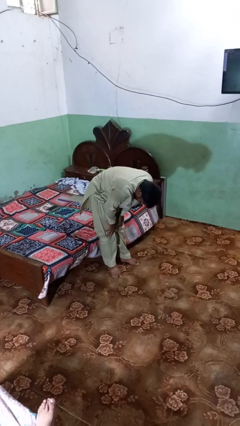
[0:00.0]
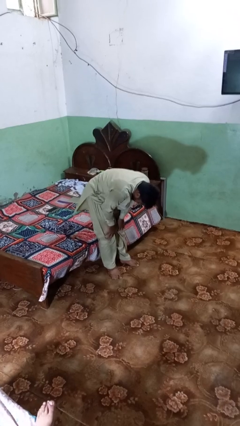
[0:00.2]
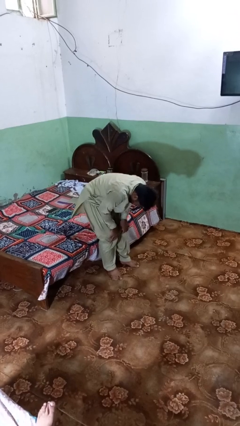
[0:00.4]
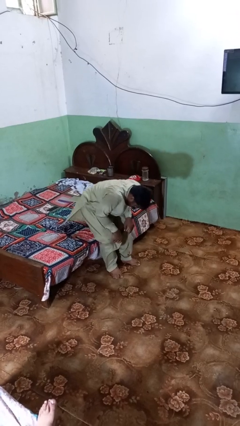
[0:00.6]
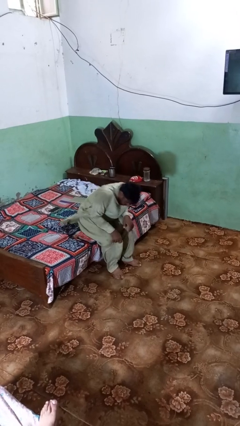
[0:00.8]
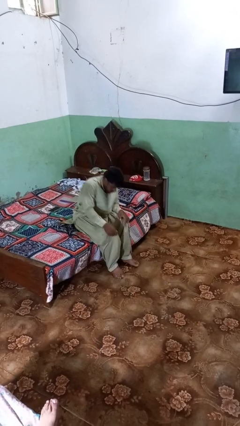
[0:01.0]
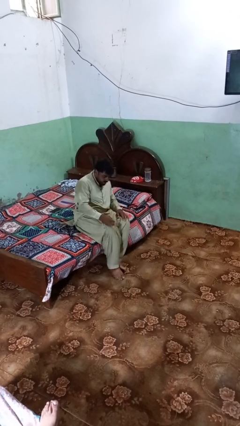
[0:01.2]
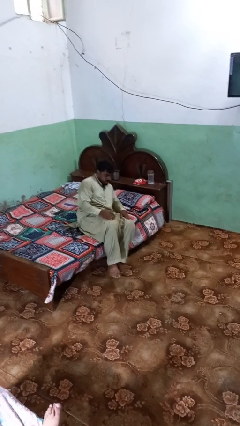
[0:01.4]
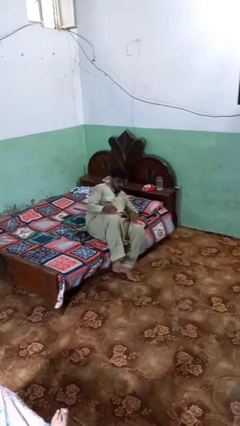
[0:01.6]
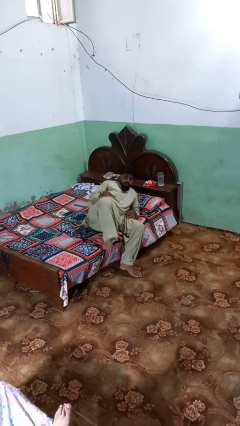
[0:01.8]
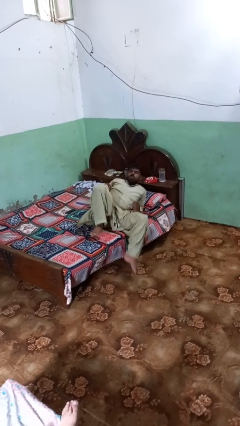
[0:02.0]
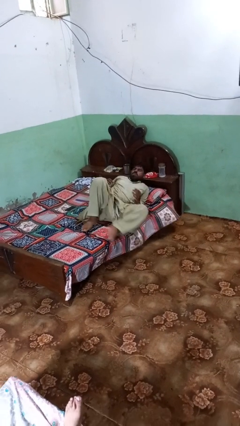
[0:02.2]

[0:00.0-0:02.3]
person lies down on bed

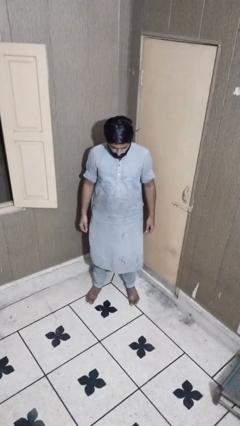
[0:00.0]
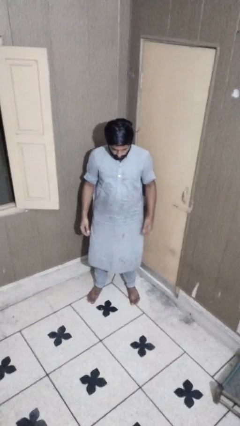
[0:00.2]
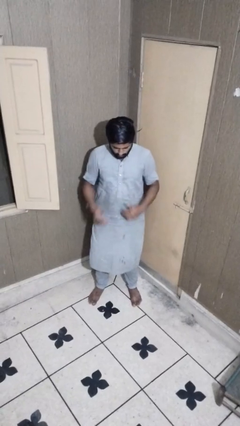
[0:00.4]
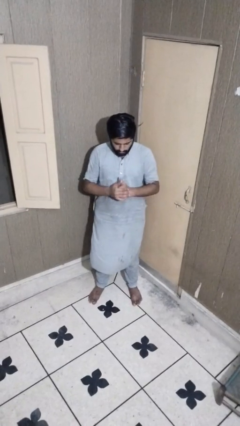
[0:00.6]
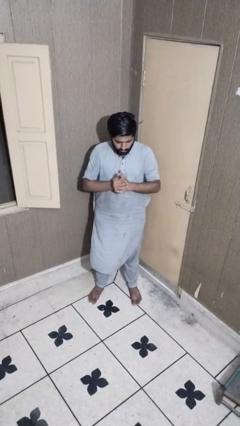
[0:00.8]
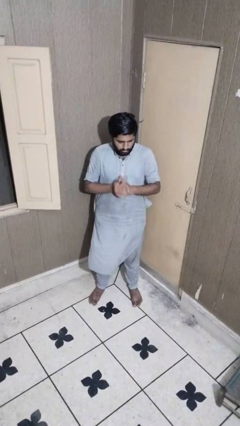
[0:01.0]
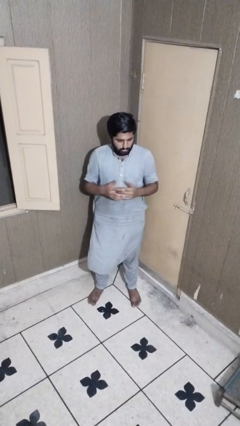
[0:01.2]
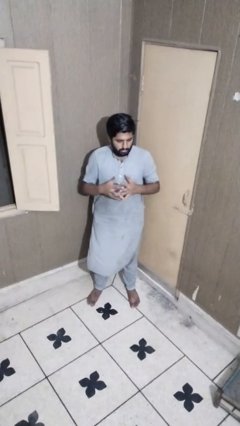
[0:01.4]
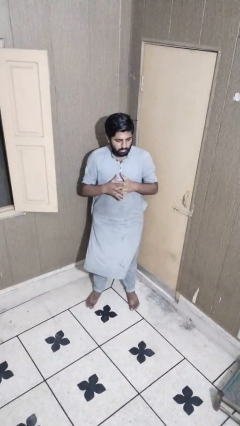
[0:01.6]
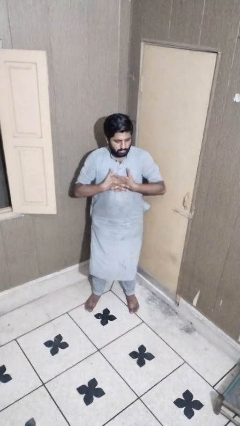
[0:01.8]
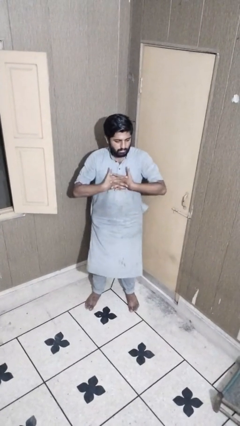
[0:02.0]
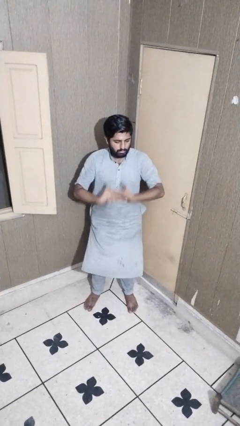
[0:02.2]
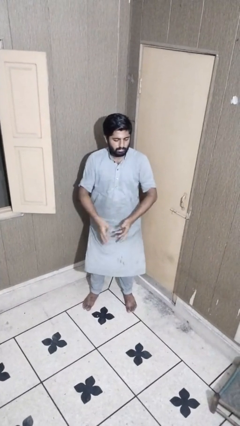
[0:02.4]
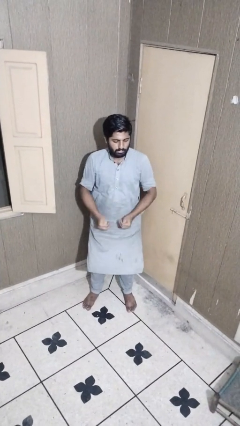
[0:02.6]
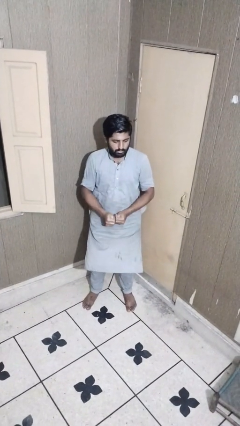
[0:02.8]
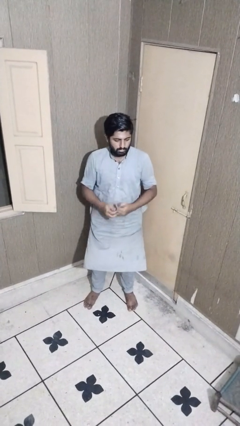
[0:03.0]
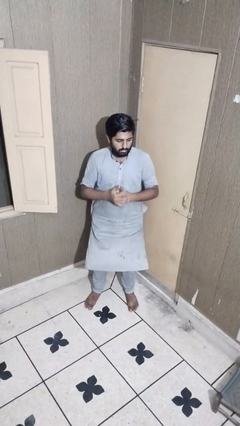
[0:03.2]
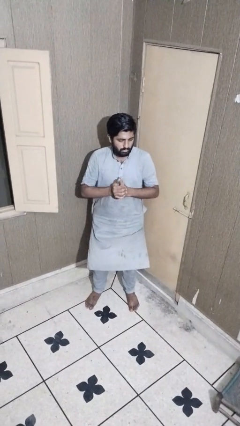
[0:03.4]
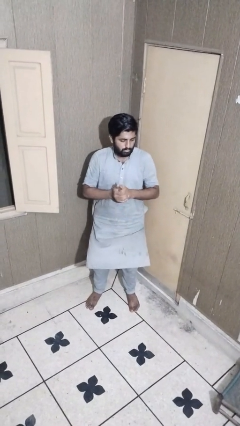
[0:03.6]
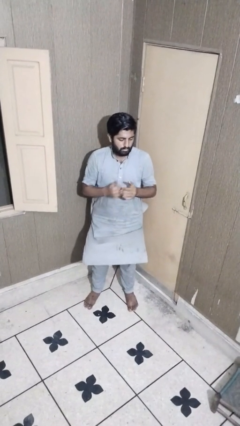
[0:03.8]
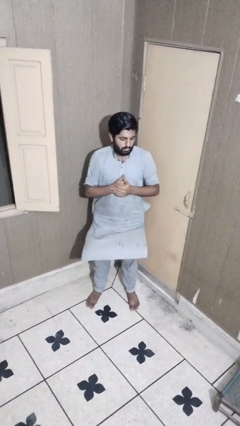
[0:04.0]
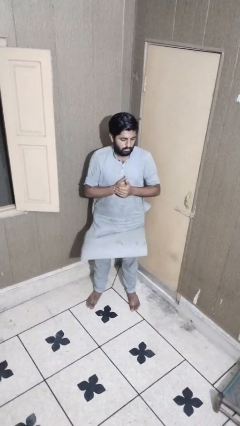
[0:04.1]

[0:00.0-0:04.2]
person cracks knuckles

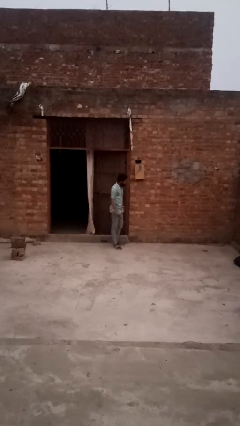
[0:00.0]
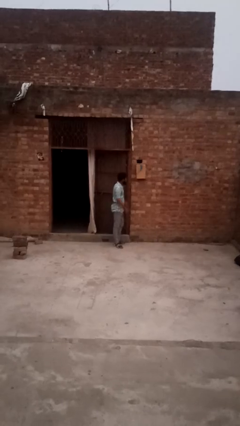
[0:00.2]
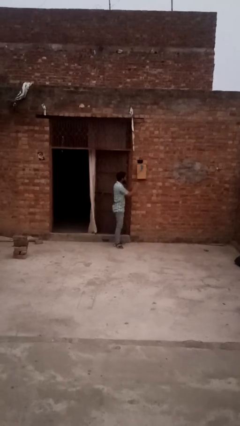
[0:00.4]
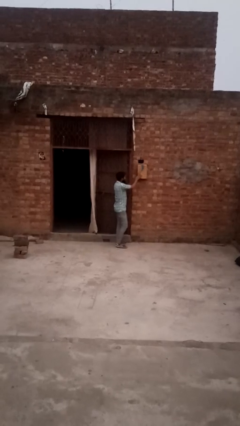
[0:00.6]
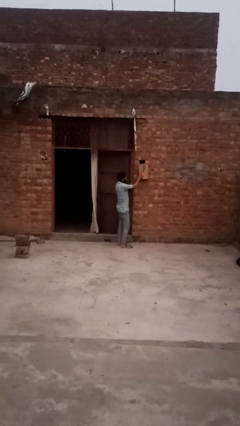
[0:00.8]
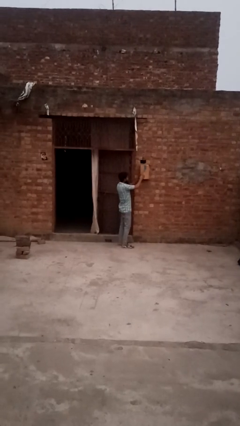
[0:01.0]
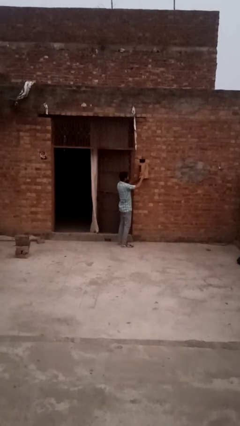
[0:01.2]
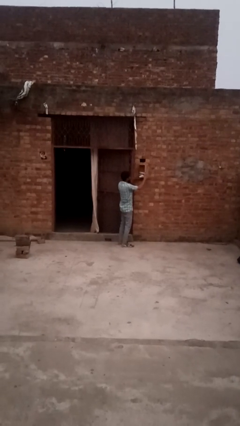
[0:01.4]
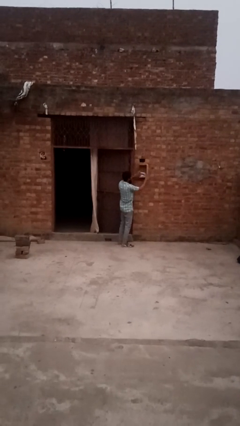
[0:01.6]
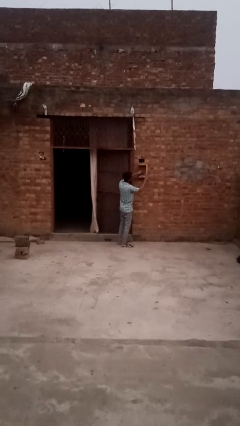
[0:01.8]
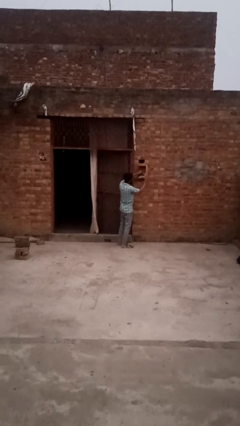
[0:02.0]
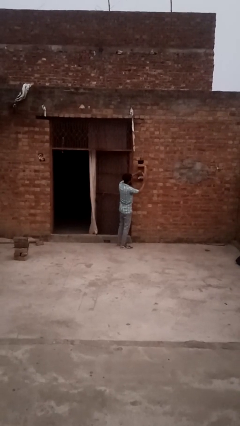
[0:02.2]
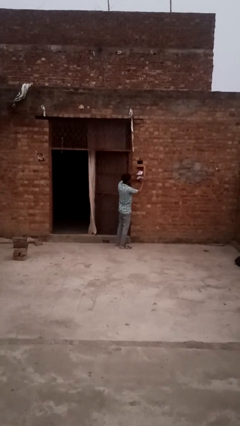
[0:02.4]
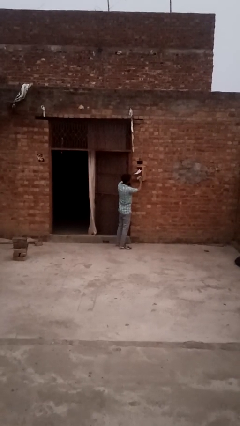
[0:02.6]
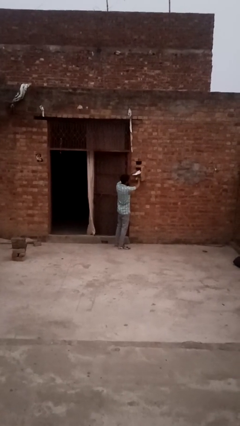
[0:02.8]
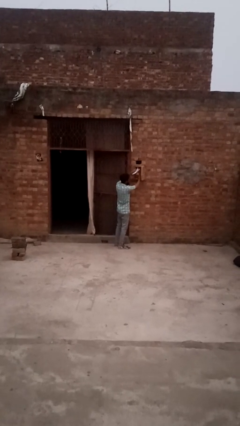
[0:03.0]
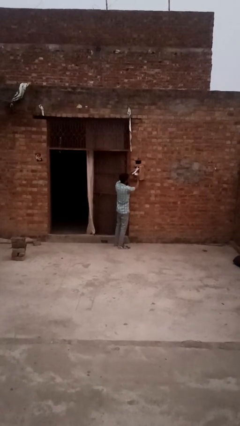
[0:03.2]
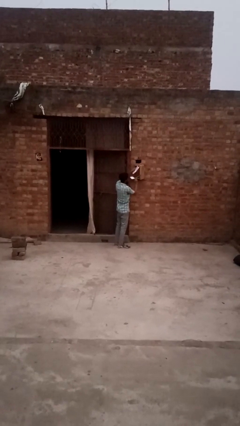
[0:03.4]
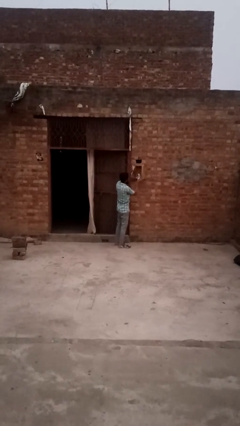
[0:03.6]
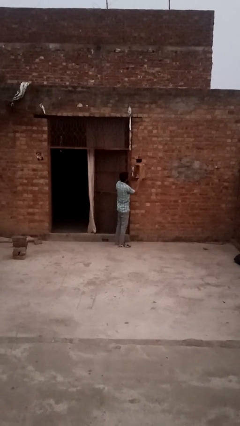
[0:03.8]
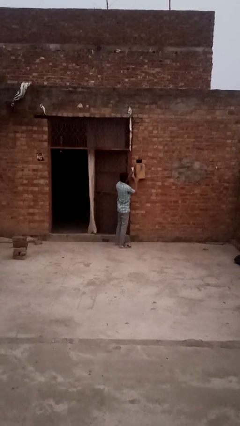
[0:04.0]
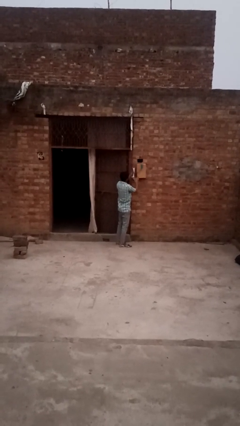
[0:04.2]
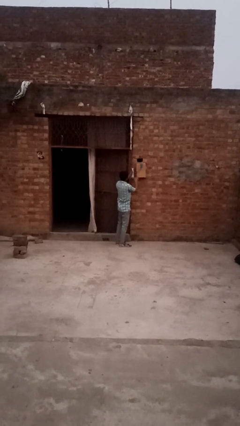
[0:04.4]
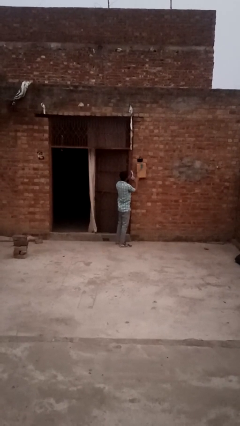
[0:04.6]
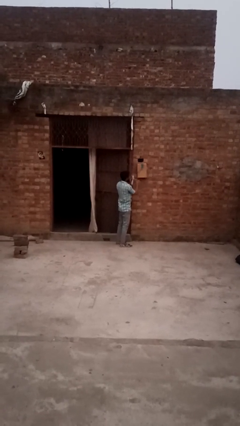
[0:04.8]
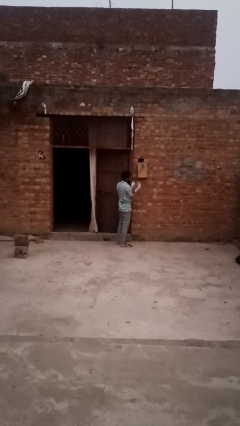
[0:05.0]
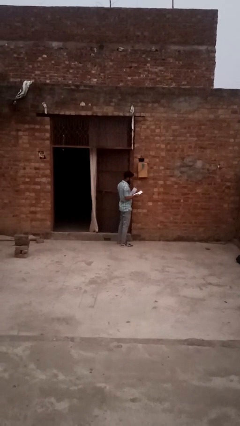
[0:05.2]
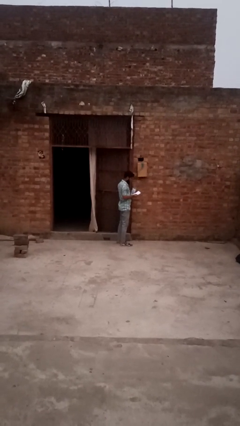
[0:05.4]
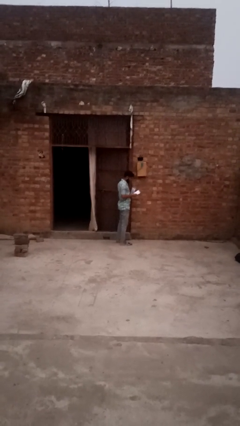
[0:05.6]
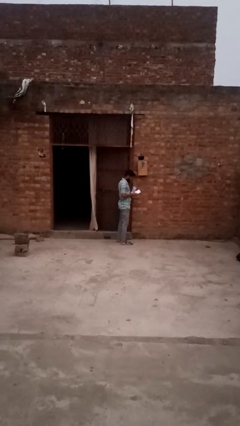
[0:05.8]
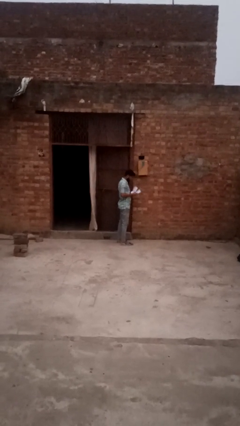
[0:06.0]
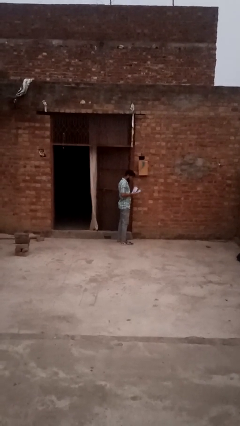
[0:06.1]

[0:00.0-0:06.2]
person puts letters in mailbox

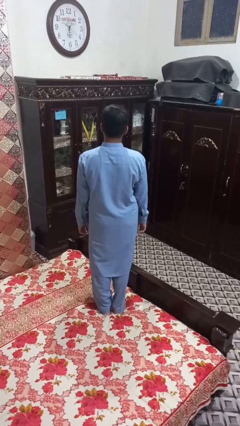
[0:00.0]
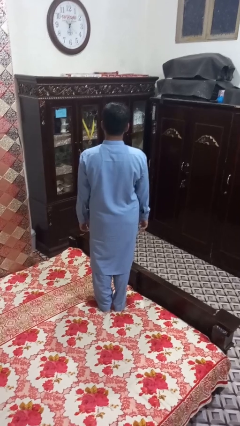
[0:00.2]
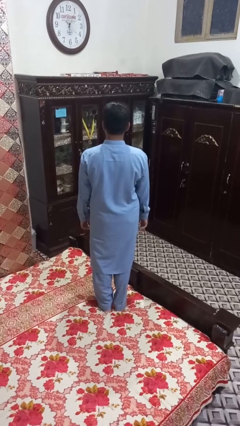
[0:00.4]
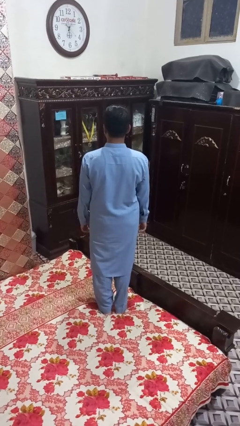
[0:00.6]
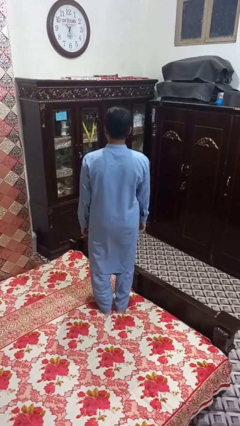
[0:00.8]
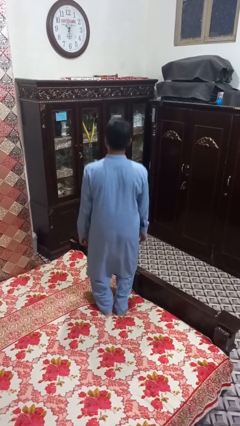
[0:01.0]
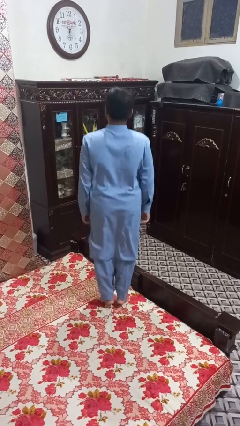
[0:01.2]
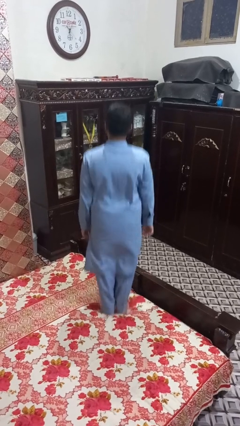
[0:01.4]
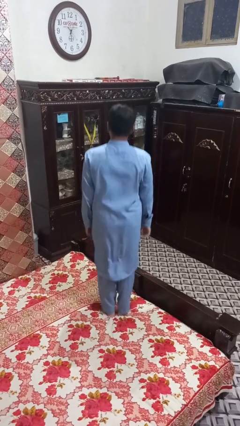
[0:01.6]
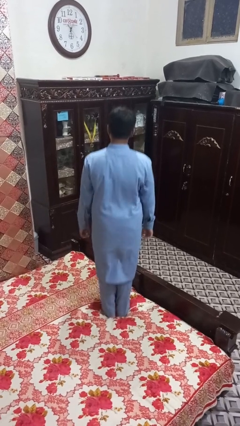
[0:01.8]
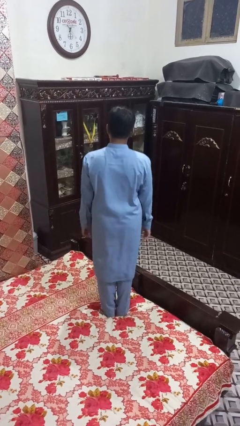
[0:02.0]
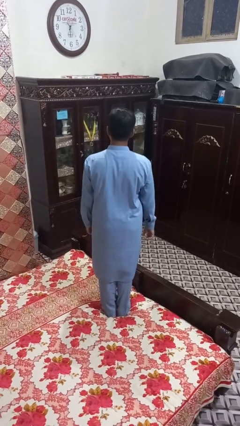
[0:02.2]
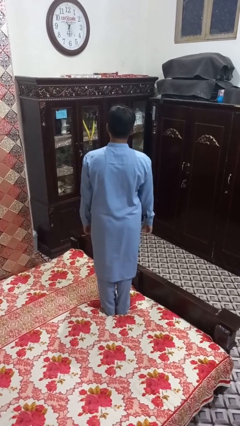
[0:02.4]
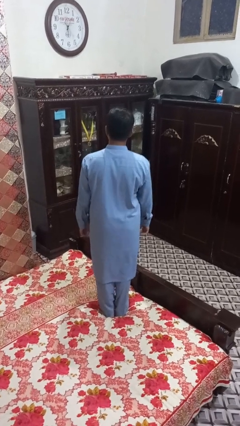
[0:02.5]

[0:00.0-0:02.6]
person jumps on bed

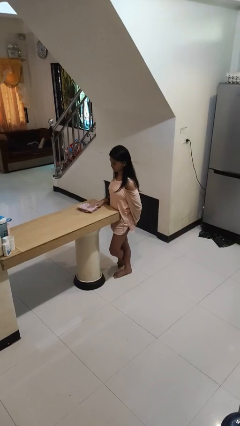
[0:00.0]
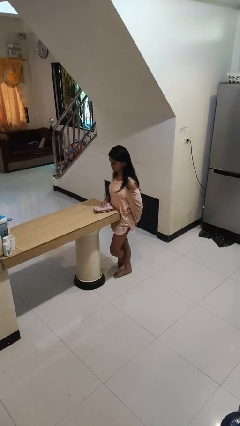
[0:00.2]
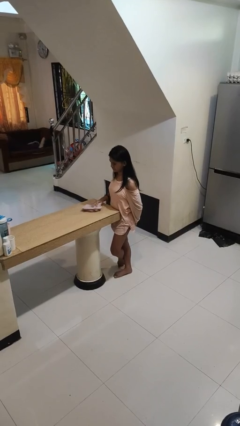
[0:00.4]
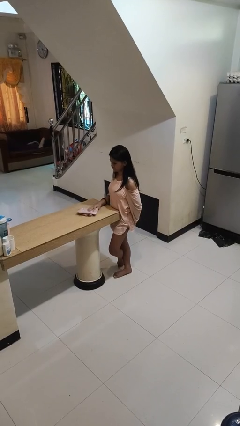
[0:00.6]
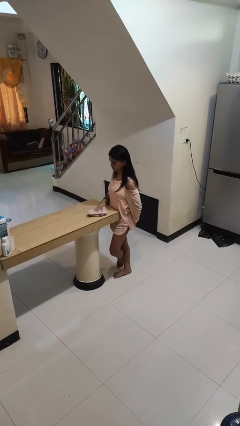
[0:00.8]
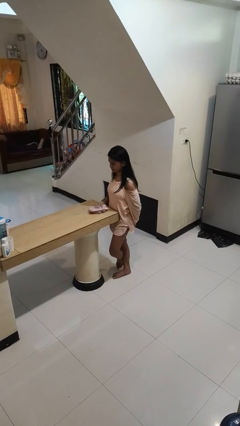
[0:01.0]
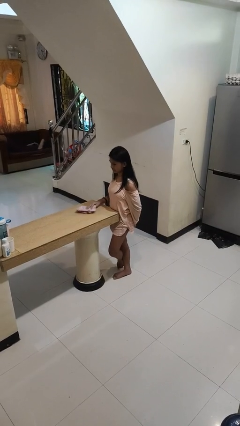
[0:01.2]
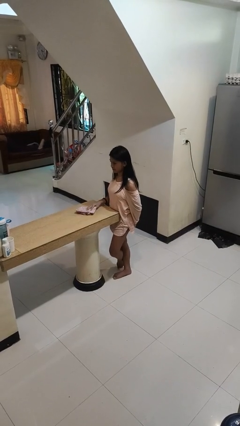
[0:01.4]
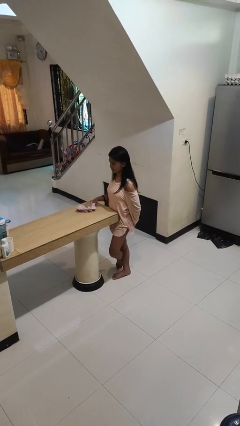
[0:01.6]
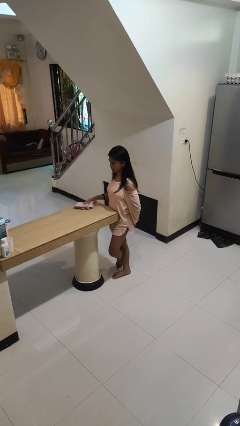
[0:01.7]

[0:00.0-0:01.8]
person cleans table with rag

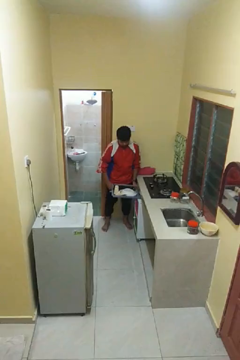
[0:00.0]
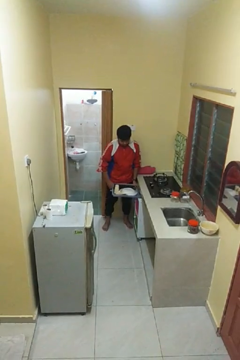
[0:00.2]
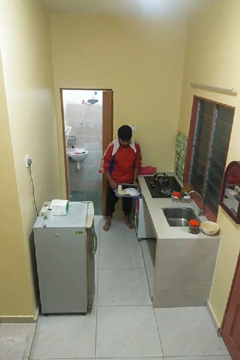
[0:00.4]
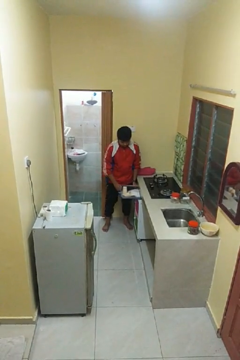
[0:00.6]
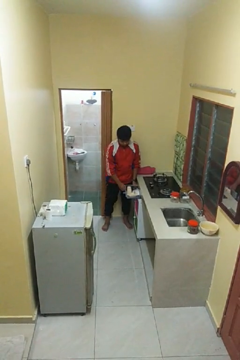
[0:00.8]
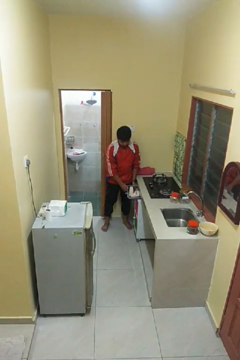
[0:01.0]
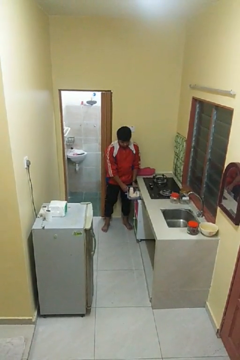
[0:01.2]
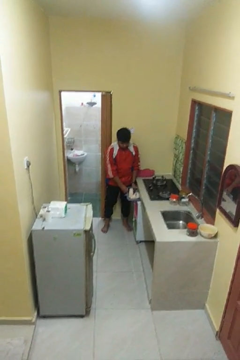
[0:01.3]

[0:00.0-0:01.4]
person closes kitchen drawer
